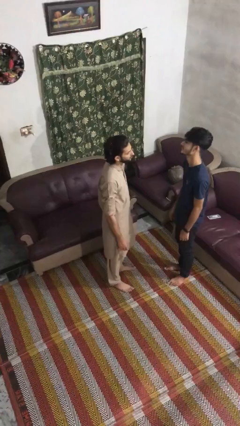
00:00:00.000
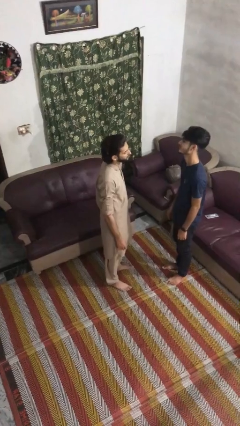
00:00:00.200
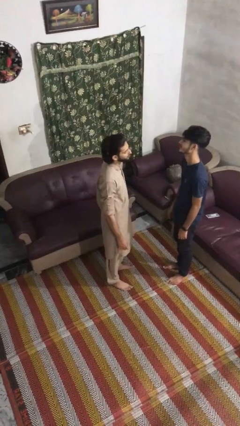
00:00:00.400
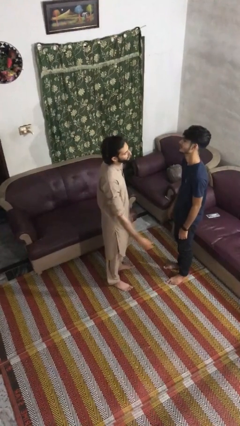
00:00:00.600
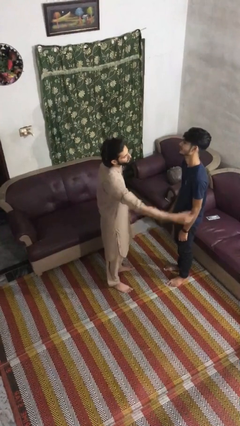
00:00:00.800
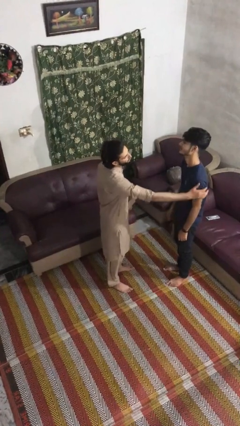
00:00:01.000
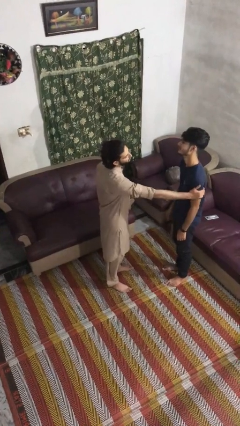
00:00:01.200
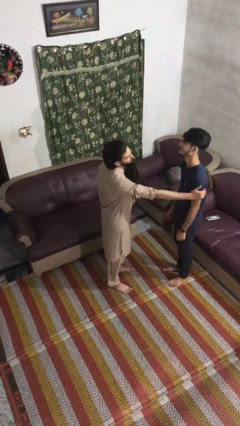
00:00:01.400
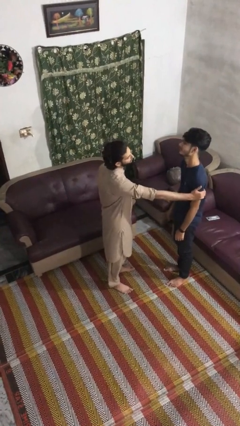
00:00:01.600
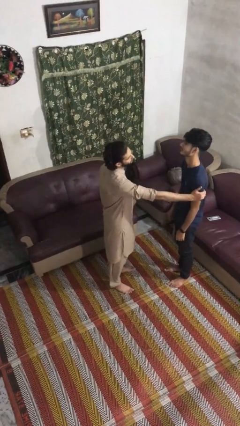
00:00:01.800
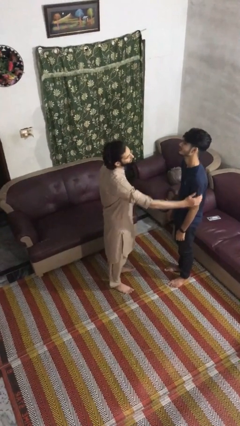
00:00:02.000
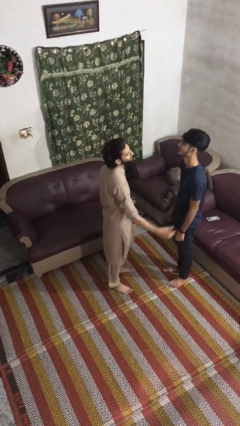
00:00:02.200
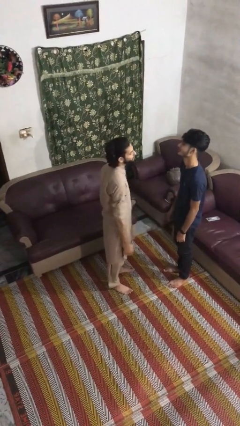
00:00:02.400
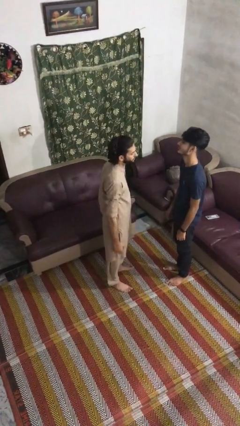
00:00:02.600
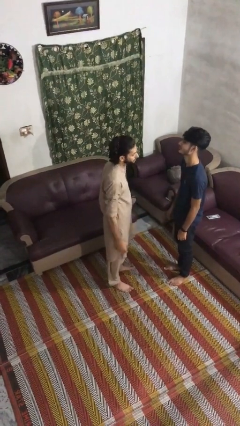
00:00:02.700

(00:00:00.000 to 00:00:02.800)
person grabs person by bicep

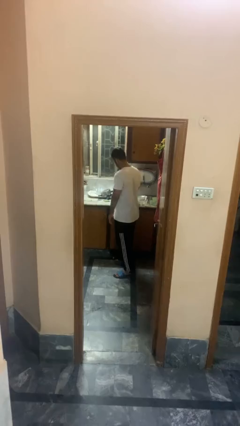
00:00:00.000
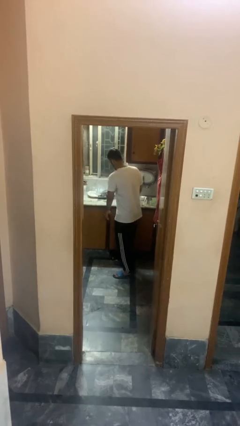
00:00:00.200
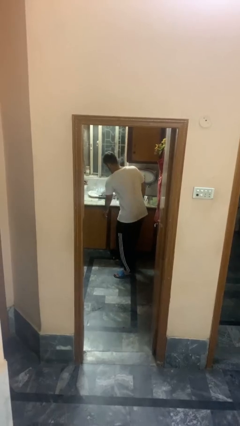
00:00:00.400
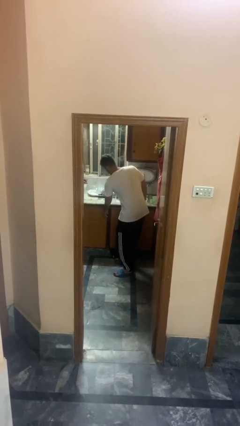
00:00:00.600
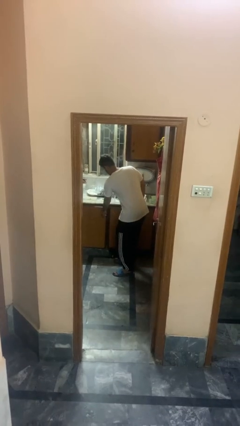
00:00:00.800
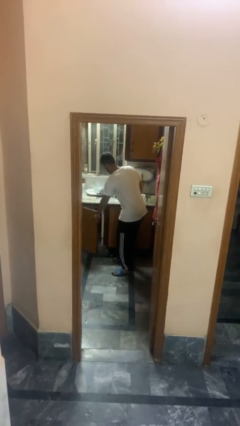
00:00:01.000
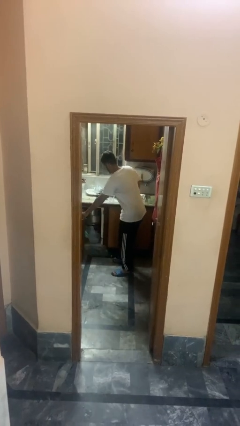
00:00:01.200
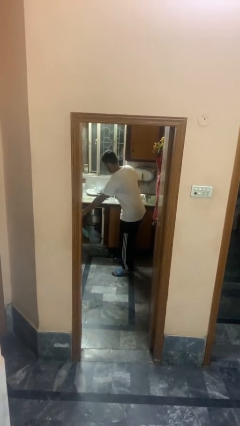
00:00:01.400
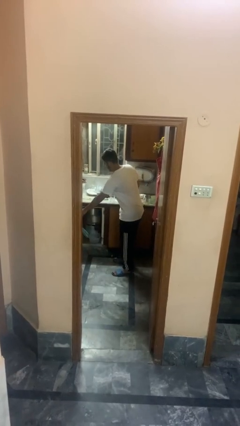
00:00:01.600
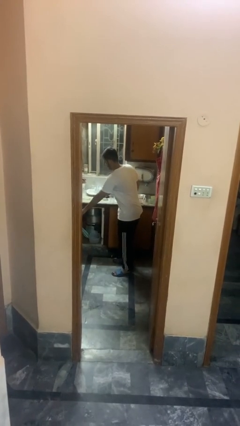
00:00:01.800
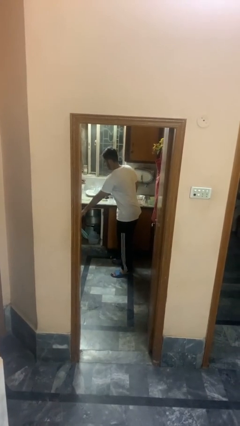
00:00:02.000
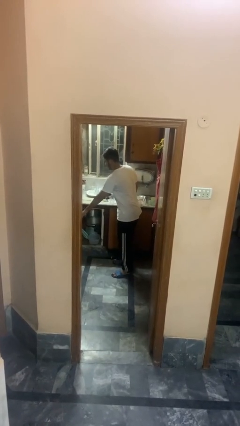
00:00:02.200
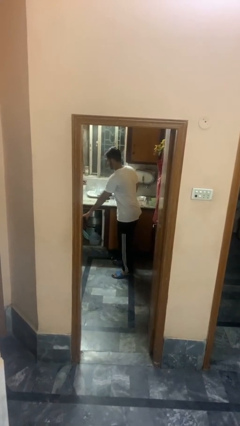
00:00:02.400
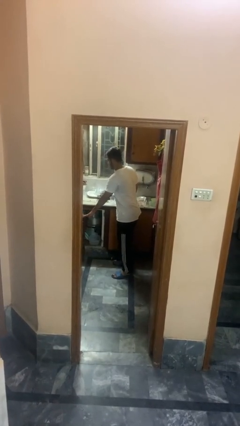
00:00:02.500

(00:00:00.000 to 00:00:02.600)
person opens cabinet

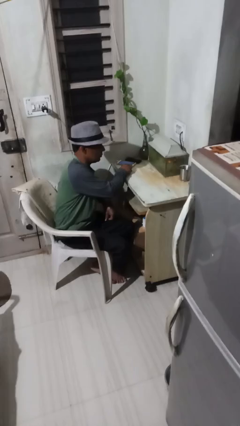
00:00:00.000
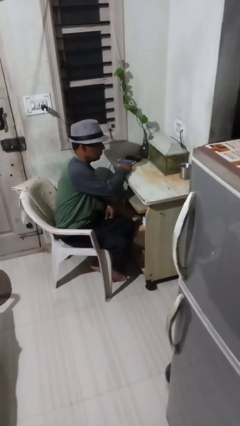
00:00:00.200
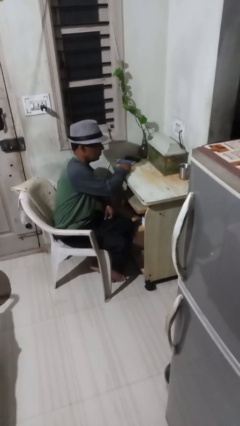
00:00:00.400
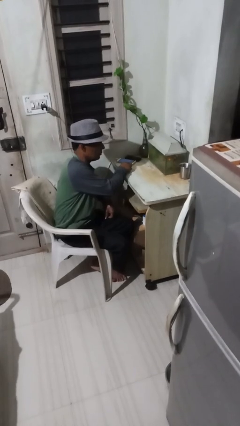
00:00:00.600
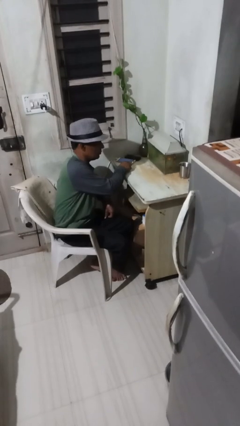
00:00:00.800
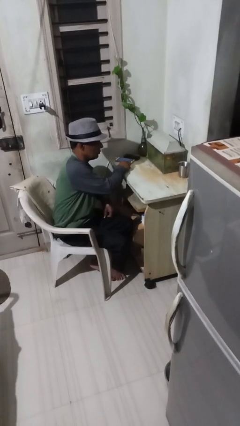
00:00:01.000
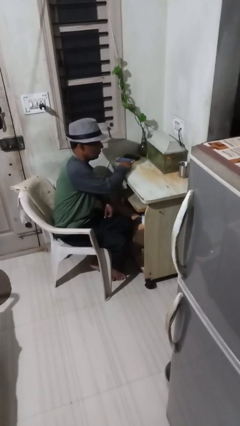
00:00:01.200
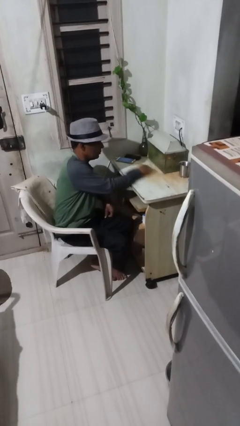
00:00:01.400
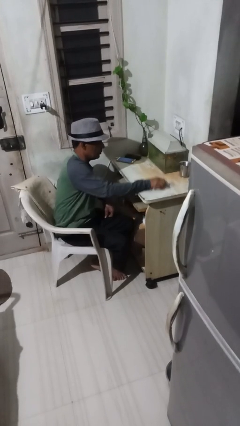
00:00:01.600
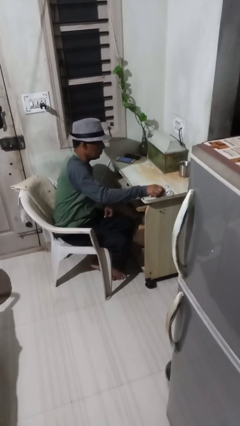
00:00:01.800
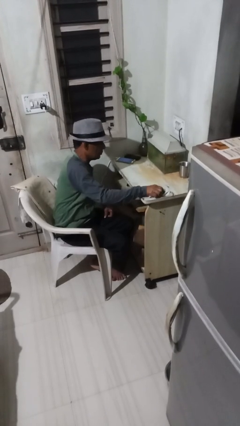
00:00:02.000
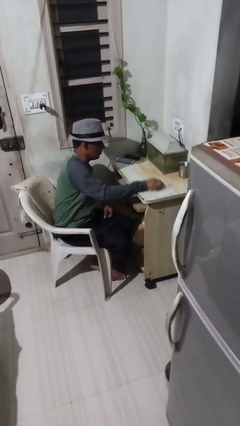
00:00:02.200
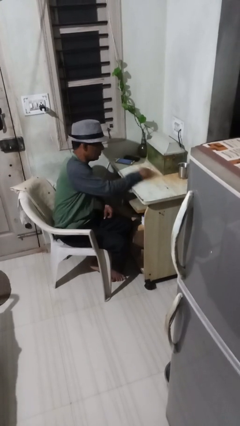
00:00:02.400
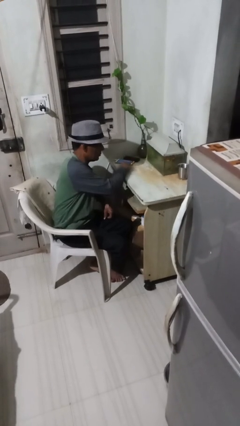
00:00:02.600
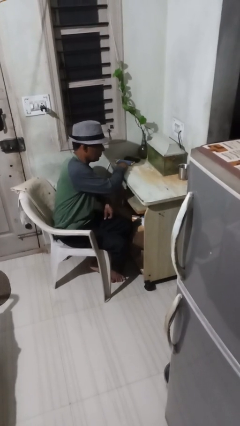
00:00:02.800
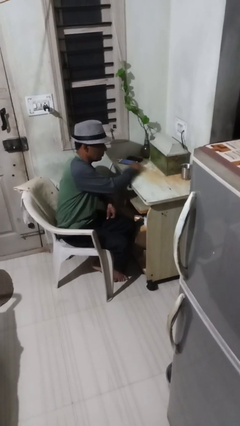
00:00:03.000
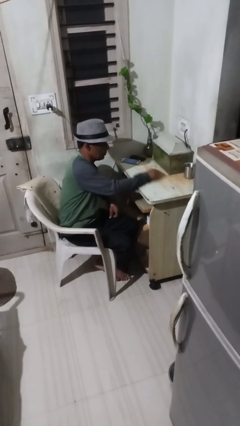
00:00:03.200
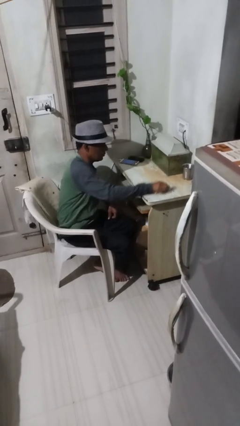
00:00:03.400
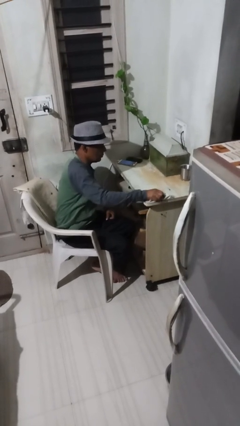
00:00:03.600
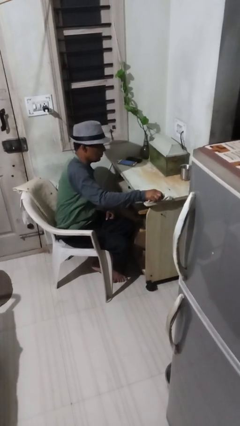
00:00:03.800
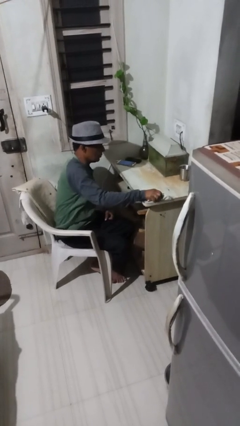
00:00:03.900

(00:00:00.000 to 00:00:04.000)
person cleans table with rag

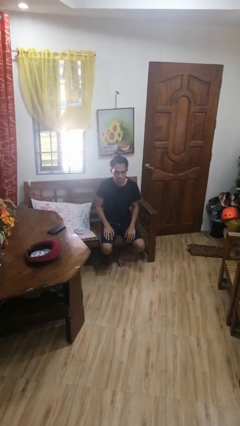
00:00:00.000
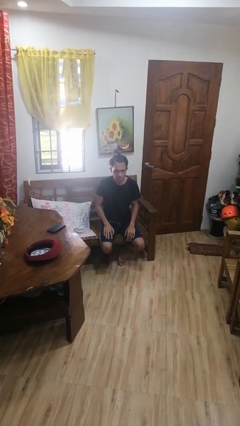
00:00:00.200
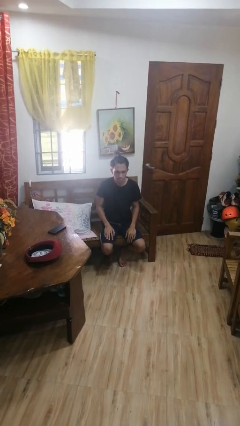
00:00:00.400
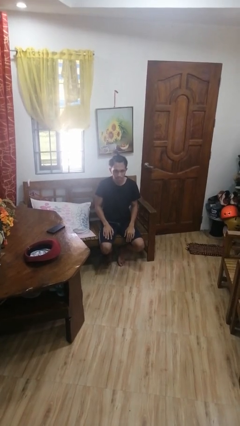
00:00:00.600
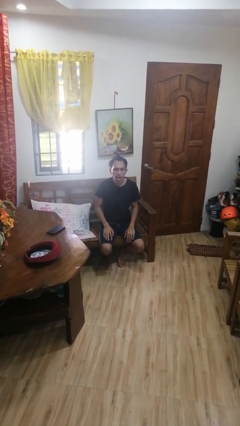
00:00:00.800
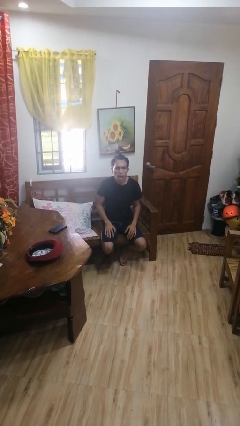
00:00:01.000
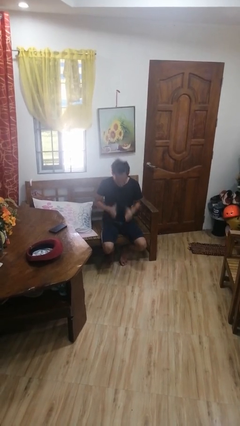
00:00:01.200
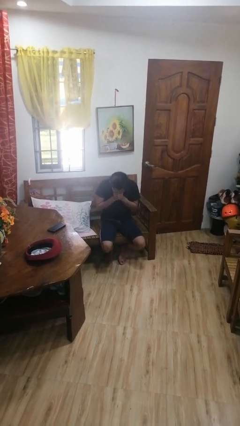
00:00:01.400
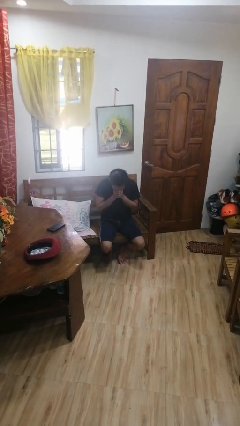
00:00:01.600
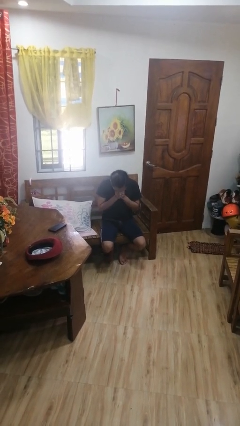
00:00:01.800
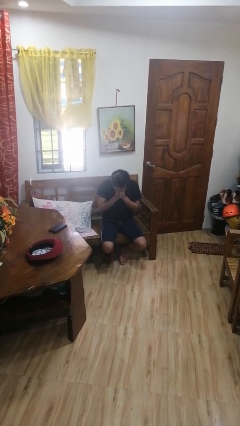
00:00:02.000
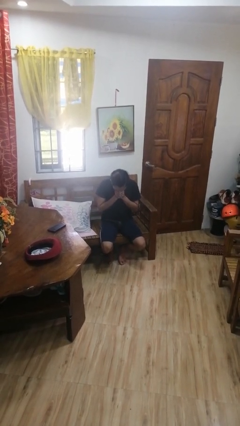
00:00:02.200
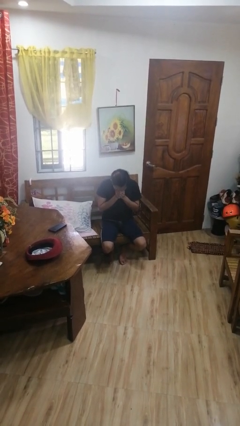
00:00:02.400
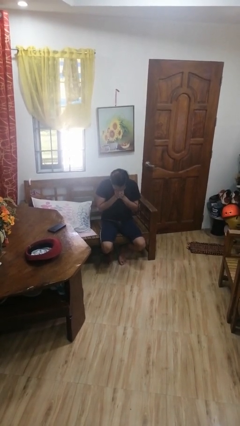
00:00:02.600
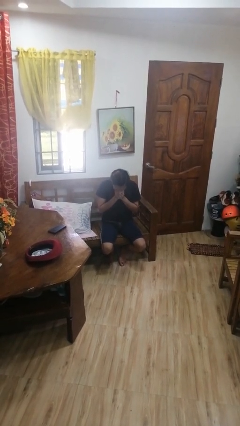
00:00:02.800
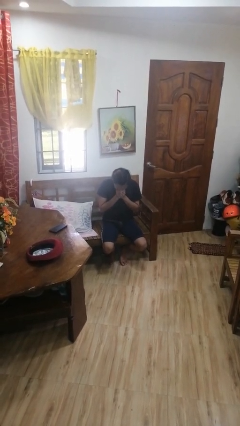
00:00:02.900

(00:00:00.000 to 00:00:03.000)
person sneezes into hand

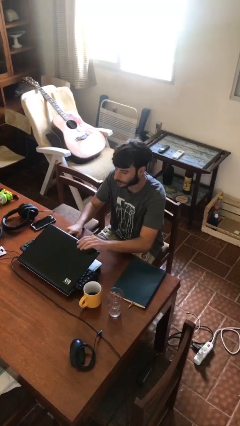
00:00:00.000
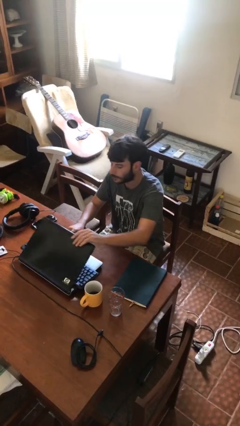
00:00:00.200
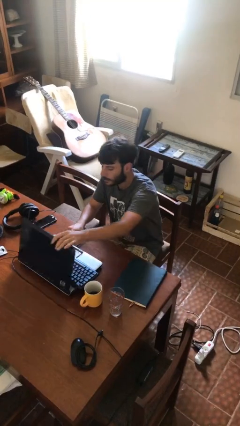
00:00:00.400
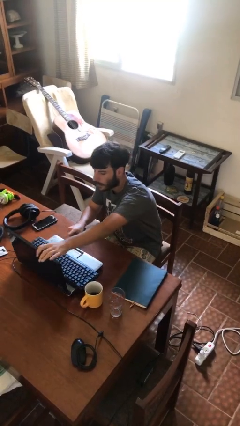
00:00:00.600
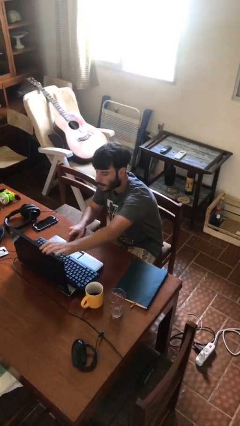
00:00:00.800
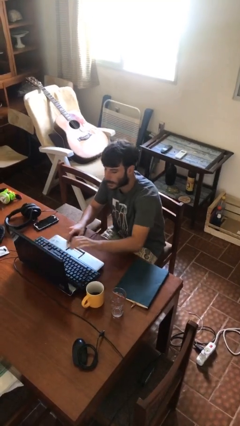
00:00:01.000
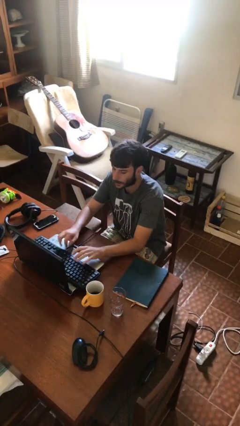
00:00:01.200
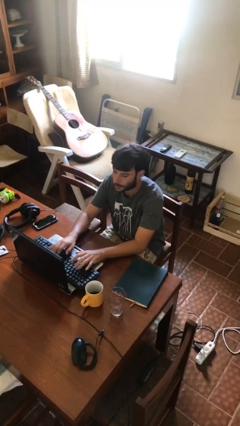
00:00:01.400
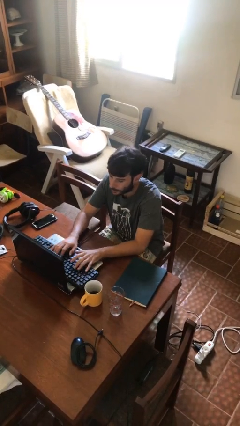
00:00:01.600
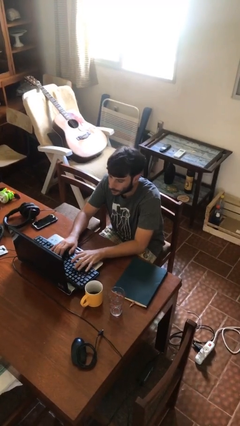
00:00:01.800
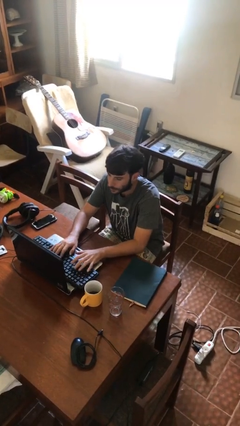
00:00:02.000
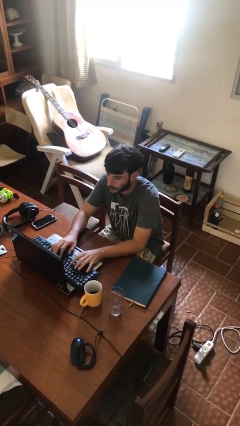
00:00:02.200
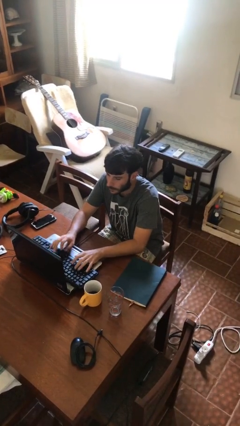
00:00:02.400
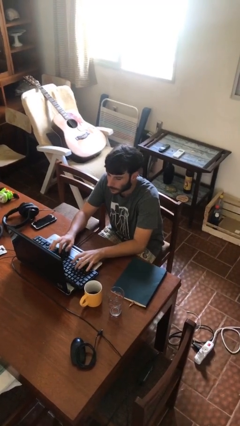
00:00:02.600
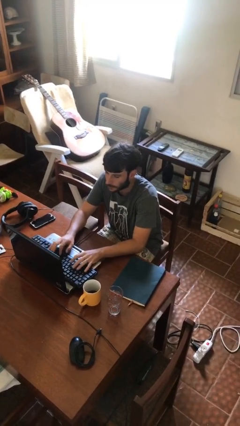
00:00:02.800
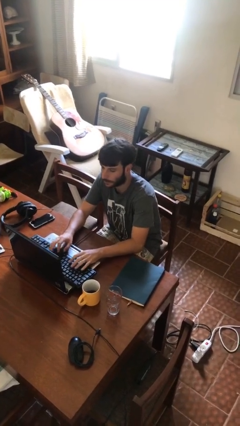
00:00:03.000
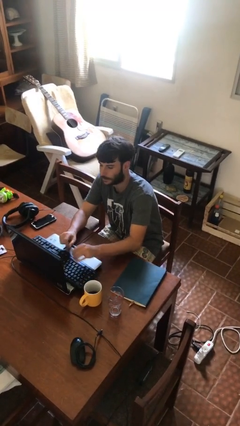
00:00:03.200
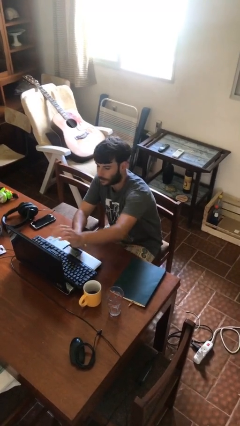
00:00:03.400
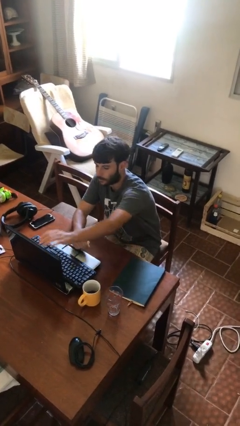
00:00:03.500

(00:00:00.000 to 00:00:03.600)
person interacts with laptop

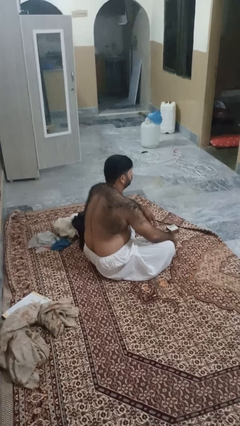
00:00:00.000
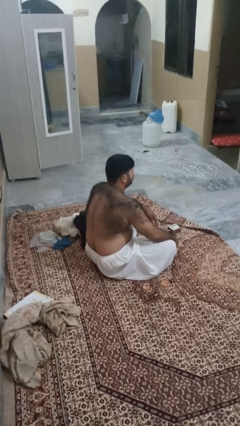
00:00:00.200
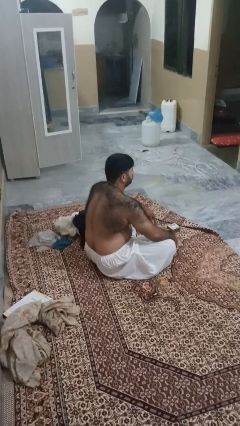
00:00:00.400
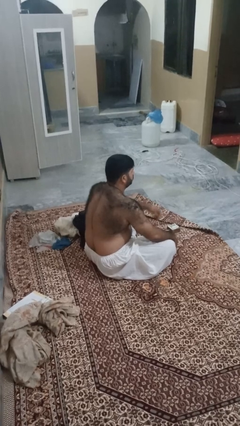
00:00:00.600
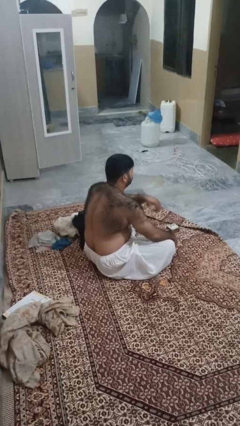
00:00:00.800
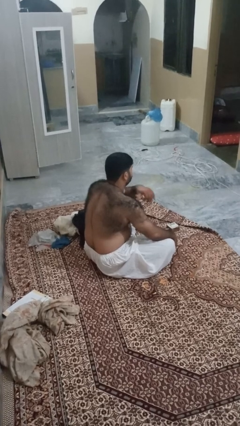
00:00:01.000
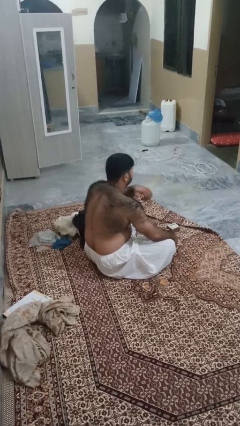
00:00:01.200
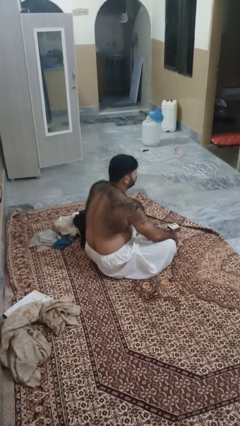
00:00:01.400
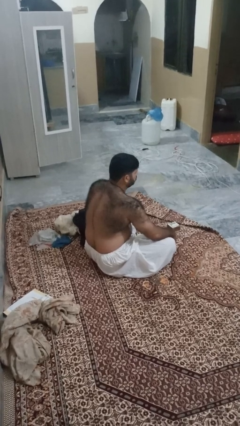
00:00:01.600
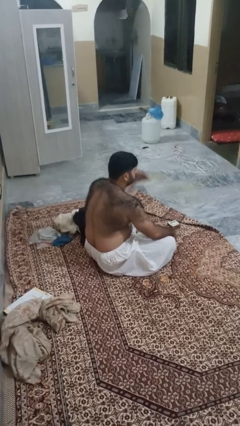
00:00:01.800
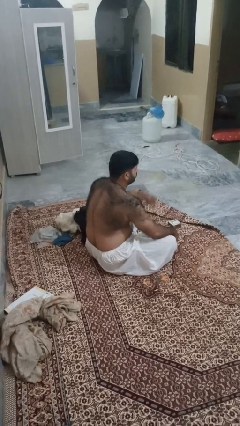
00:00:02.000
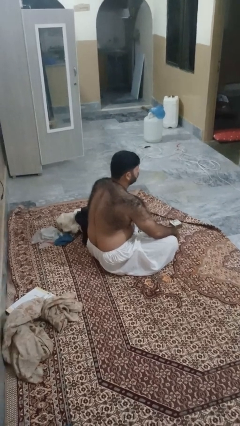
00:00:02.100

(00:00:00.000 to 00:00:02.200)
person gestures cut
